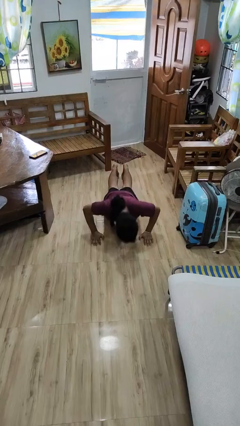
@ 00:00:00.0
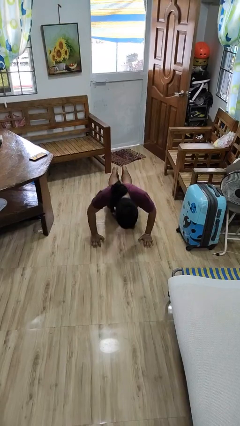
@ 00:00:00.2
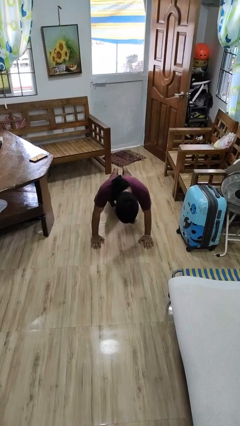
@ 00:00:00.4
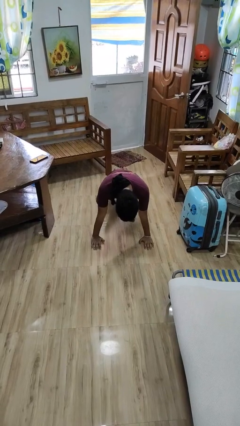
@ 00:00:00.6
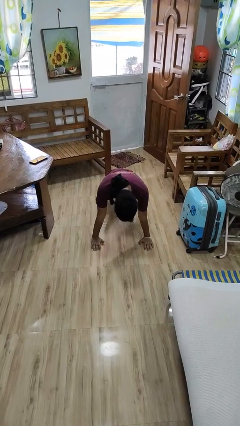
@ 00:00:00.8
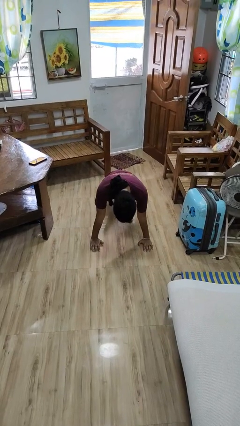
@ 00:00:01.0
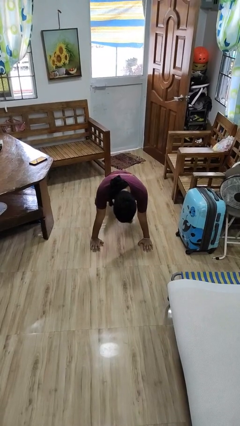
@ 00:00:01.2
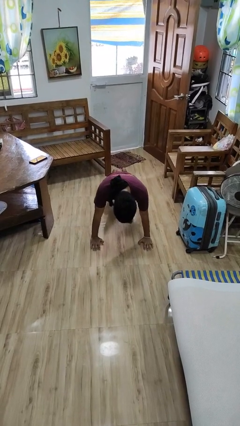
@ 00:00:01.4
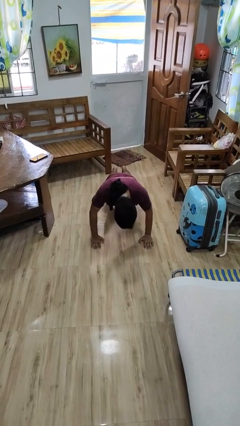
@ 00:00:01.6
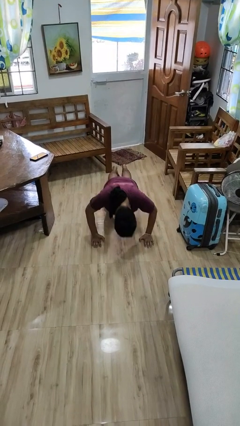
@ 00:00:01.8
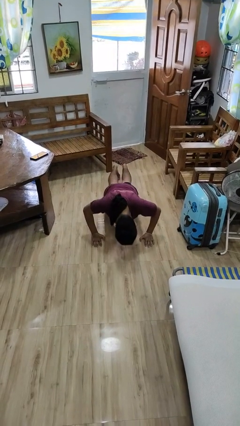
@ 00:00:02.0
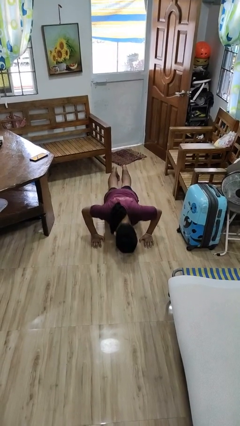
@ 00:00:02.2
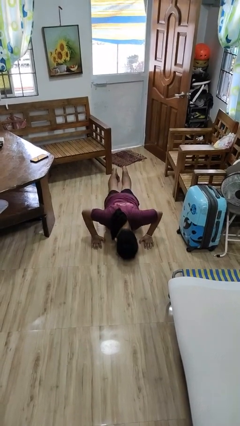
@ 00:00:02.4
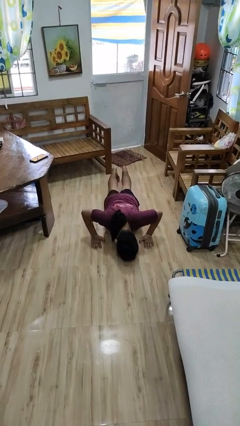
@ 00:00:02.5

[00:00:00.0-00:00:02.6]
person exercises with pushup

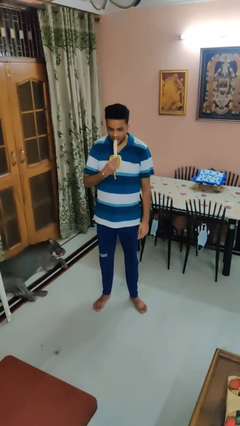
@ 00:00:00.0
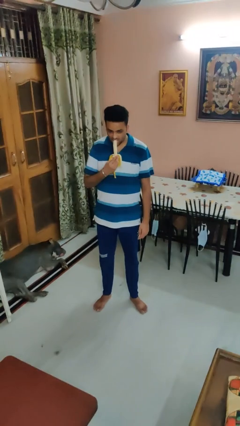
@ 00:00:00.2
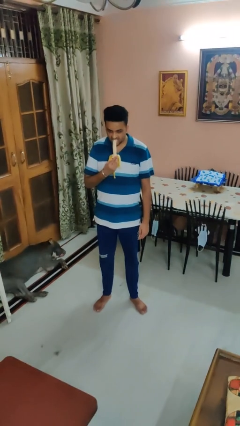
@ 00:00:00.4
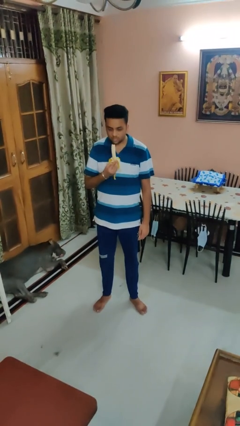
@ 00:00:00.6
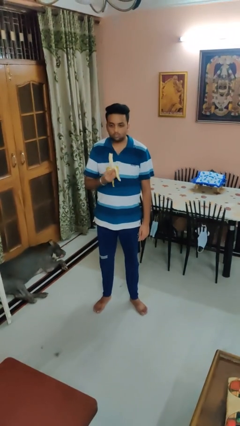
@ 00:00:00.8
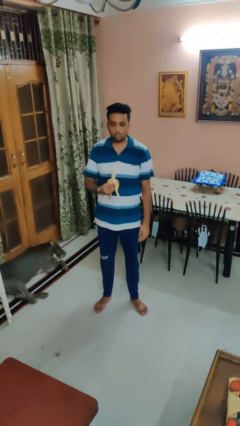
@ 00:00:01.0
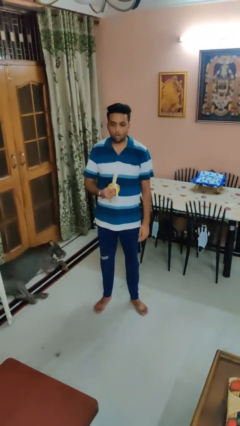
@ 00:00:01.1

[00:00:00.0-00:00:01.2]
person eats banana

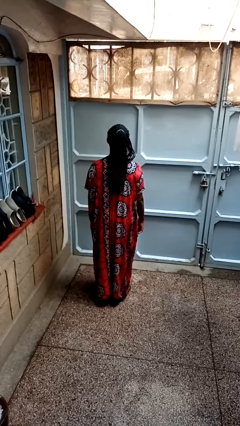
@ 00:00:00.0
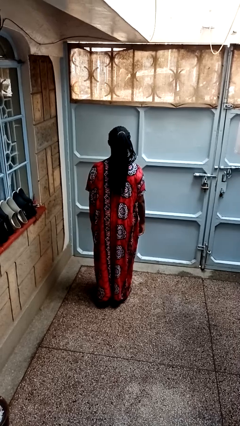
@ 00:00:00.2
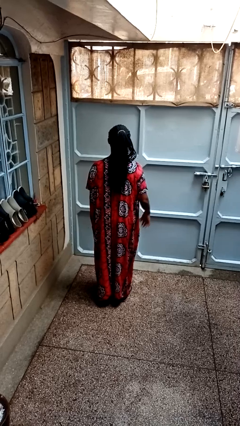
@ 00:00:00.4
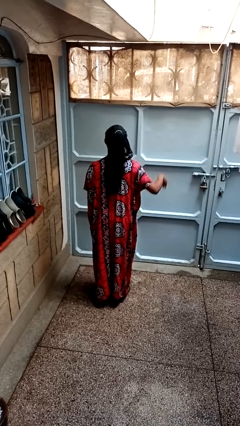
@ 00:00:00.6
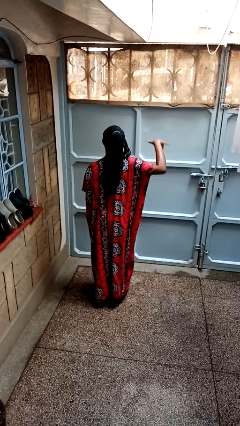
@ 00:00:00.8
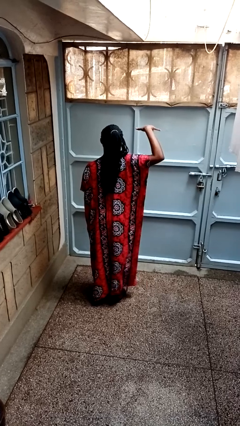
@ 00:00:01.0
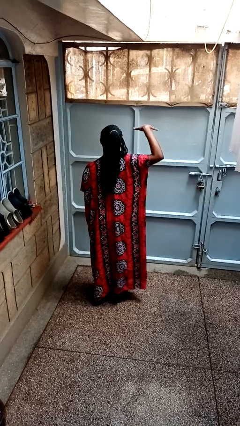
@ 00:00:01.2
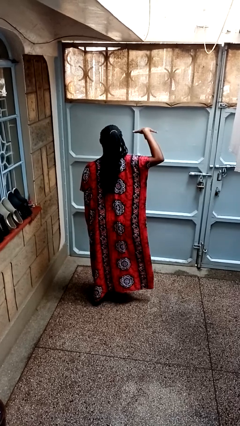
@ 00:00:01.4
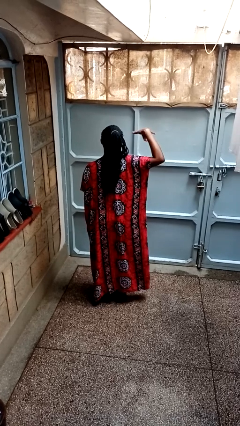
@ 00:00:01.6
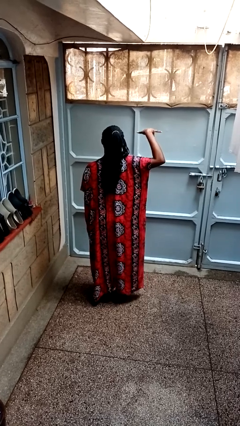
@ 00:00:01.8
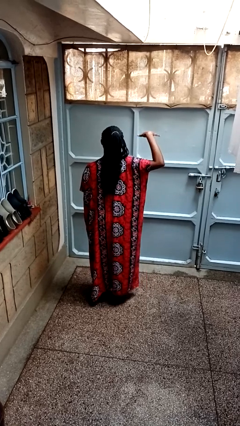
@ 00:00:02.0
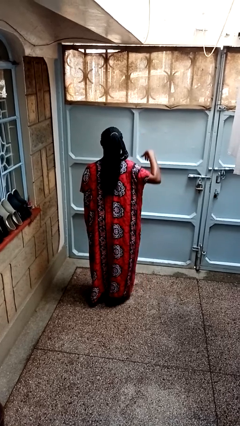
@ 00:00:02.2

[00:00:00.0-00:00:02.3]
person gestures hang loose

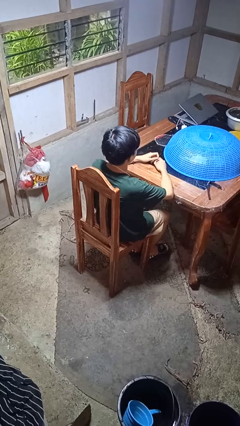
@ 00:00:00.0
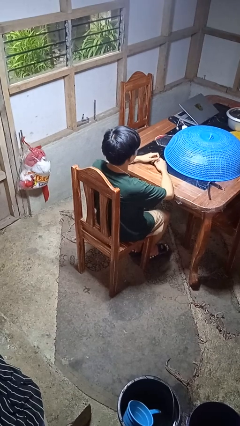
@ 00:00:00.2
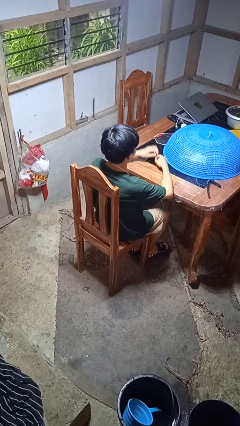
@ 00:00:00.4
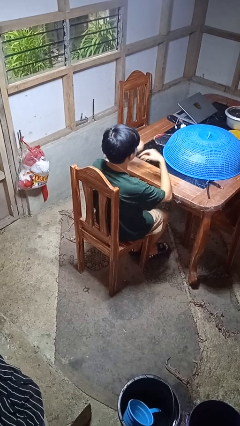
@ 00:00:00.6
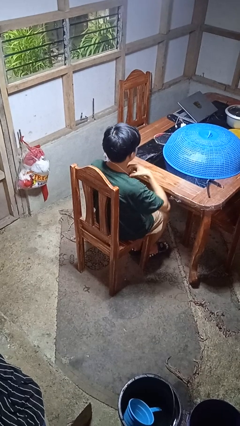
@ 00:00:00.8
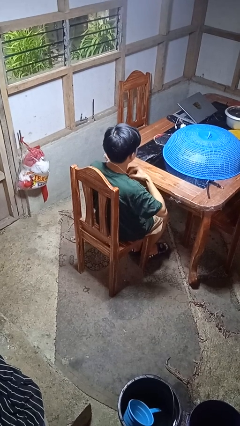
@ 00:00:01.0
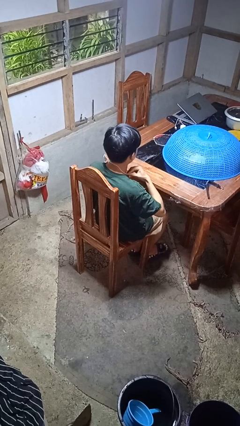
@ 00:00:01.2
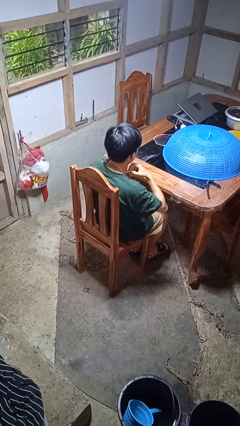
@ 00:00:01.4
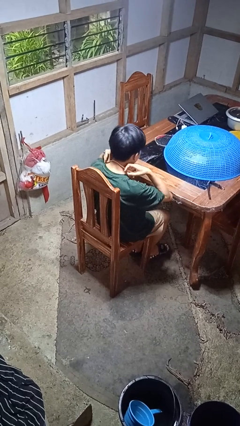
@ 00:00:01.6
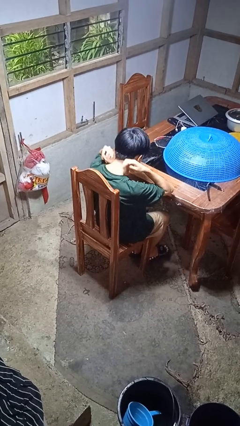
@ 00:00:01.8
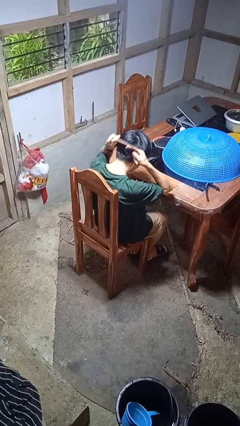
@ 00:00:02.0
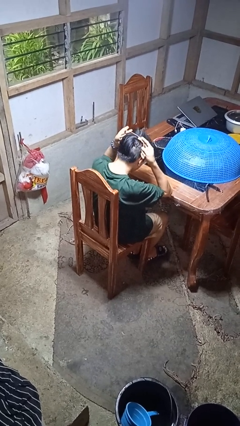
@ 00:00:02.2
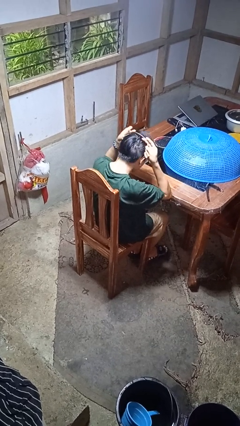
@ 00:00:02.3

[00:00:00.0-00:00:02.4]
person takes off necklace

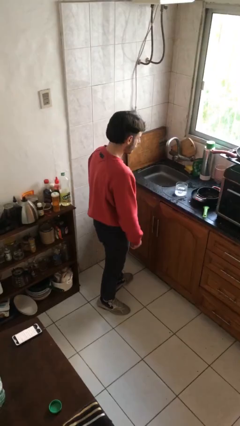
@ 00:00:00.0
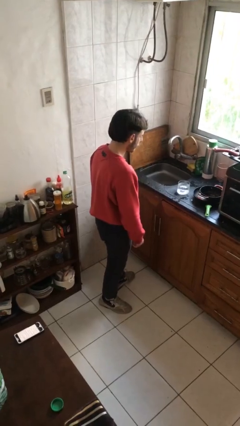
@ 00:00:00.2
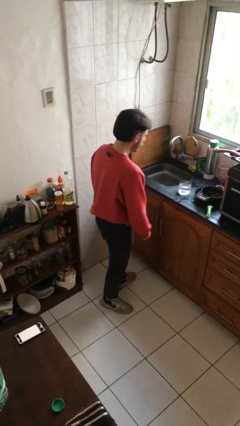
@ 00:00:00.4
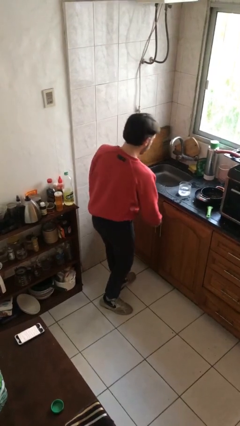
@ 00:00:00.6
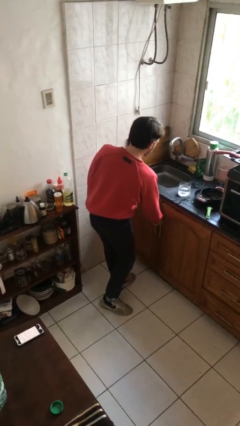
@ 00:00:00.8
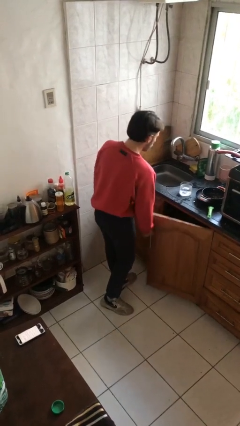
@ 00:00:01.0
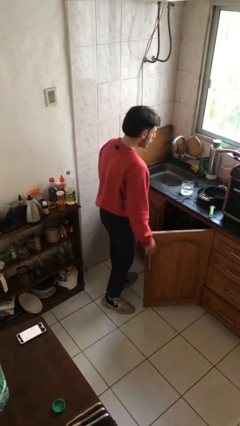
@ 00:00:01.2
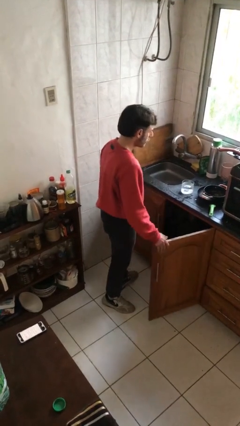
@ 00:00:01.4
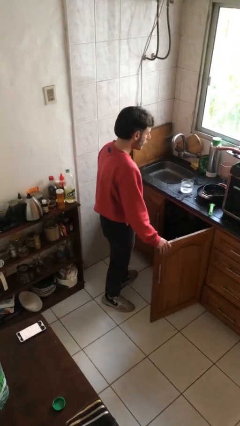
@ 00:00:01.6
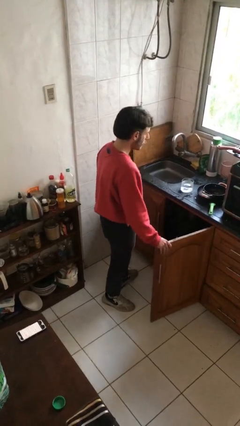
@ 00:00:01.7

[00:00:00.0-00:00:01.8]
person opens cabinet

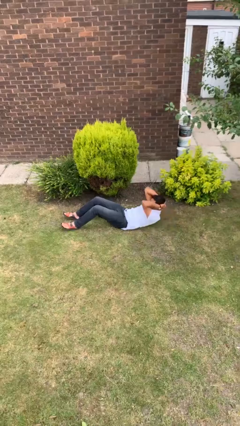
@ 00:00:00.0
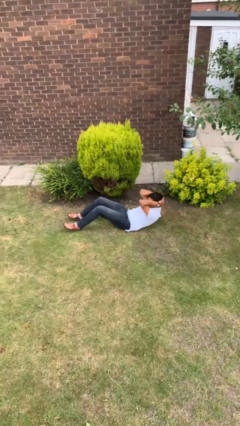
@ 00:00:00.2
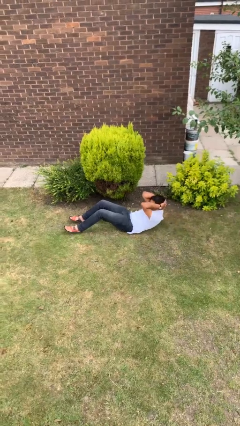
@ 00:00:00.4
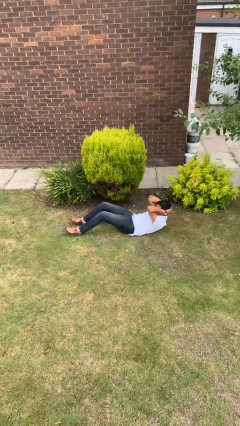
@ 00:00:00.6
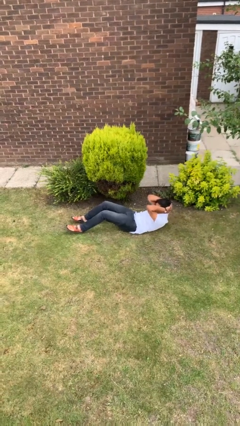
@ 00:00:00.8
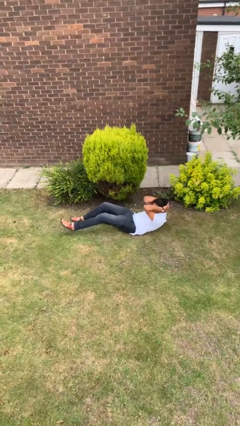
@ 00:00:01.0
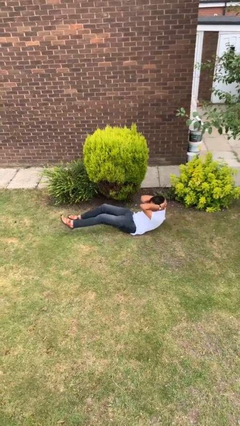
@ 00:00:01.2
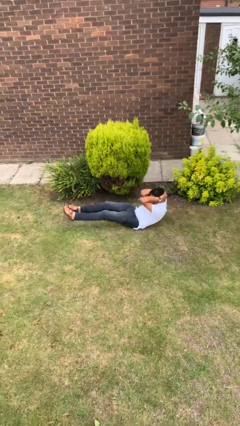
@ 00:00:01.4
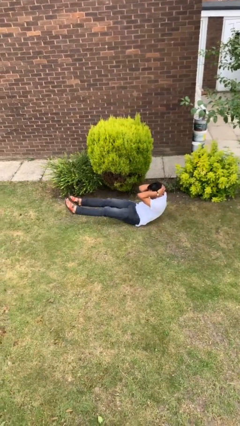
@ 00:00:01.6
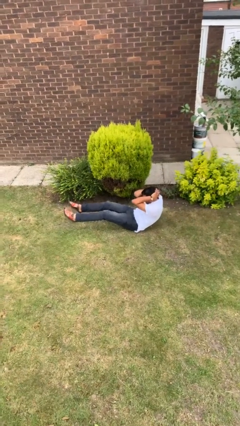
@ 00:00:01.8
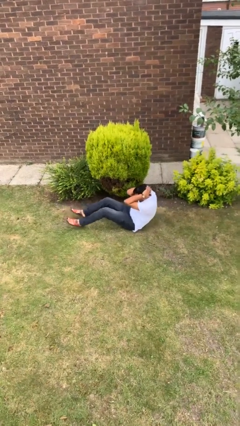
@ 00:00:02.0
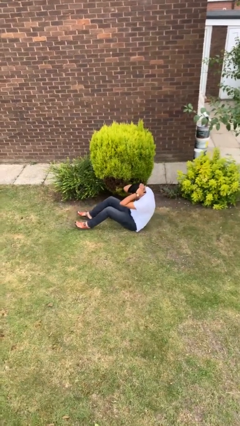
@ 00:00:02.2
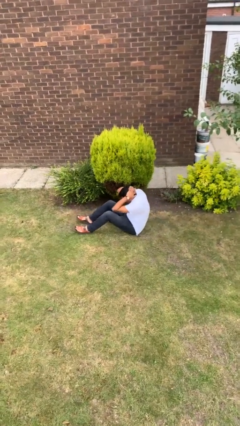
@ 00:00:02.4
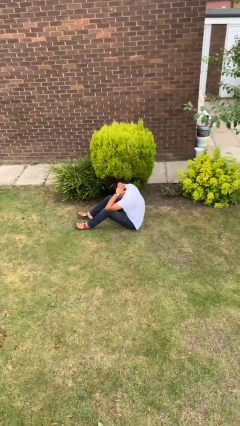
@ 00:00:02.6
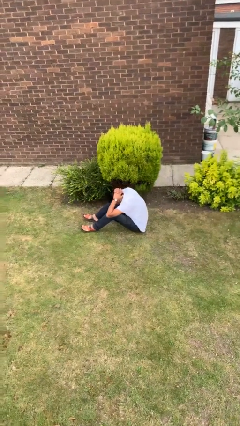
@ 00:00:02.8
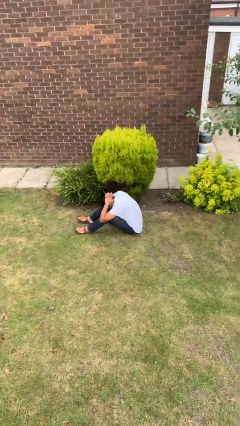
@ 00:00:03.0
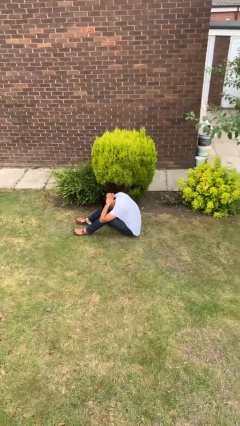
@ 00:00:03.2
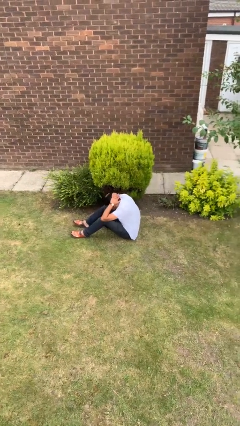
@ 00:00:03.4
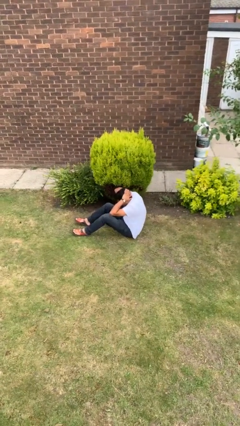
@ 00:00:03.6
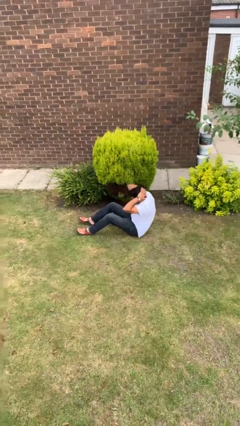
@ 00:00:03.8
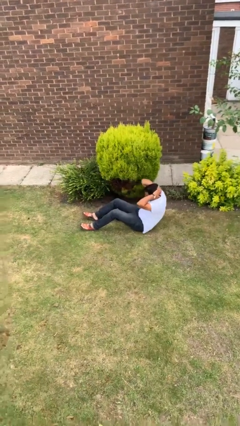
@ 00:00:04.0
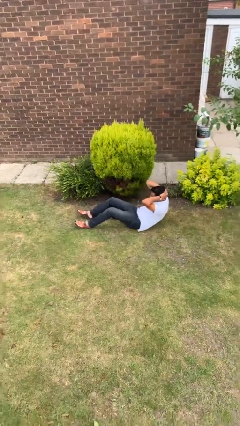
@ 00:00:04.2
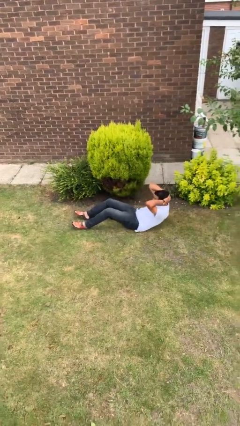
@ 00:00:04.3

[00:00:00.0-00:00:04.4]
person exercises with situp

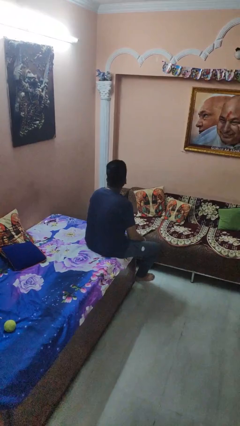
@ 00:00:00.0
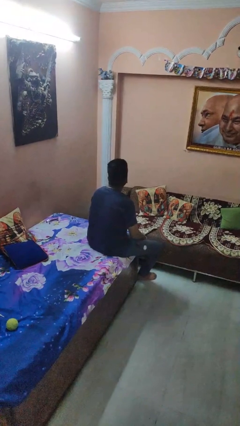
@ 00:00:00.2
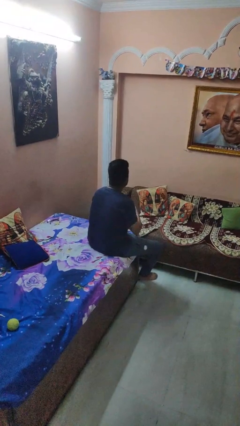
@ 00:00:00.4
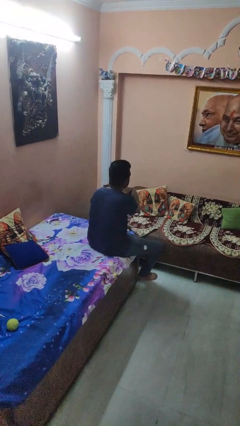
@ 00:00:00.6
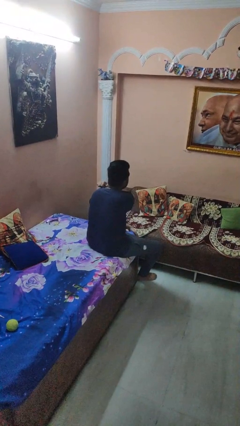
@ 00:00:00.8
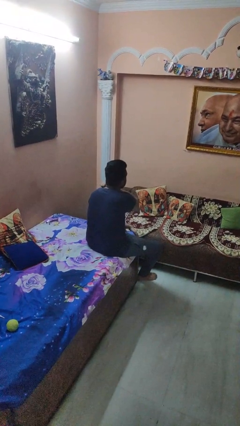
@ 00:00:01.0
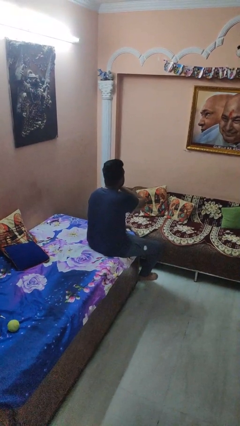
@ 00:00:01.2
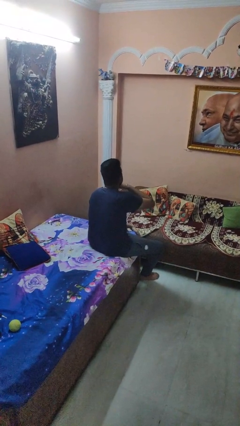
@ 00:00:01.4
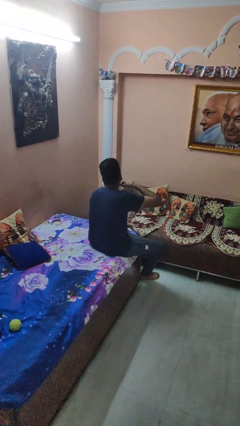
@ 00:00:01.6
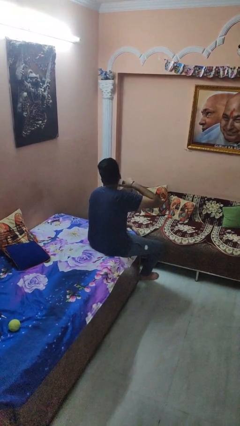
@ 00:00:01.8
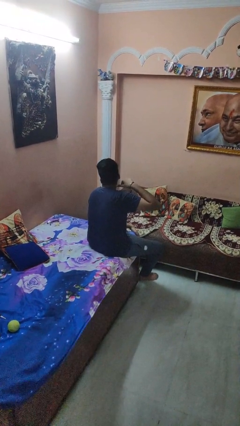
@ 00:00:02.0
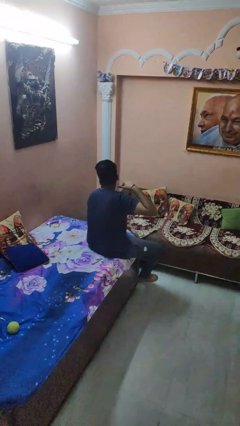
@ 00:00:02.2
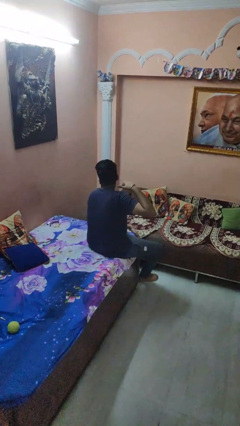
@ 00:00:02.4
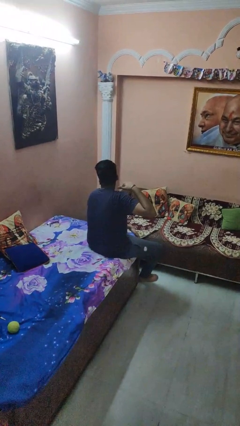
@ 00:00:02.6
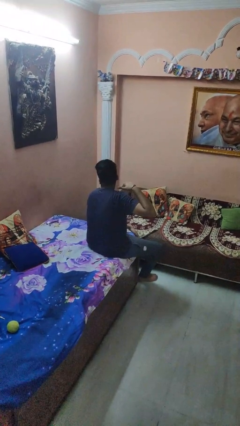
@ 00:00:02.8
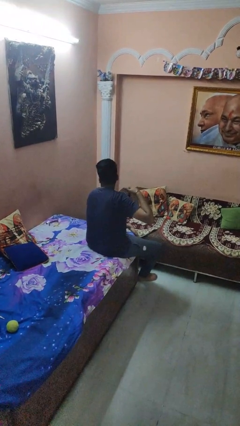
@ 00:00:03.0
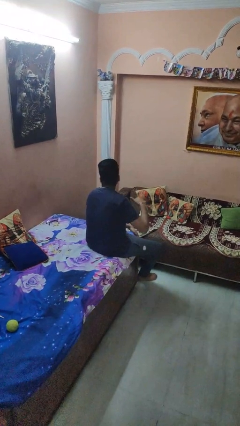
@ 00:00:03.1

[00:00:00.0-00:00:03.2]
person gestures cut
